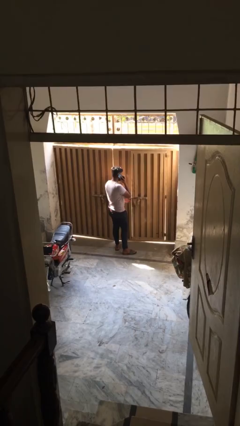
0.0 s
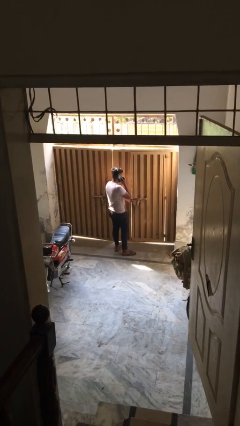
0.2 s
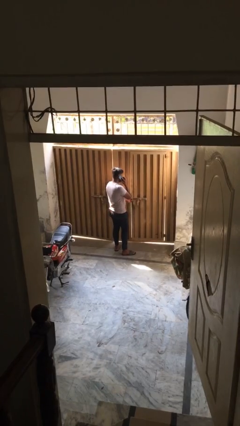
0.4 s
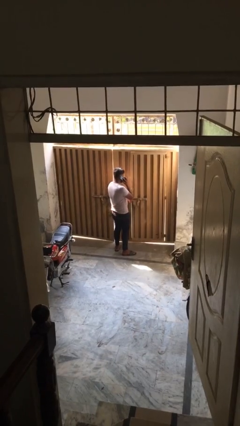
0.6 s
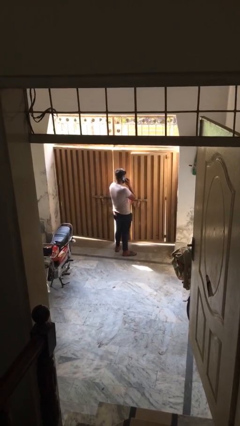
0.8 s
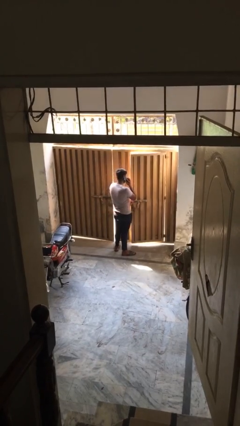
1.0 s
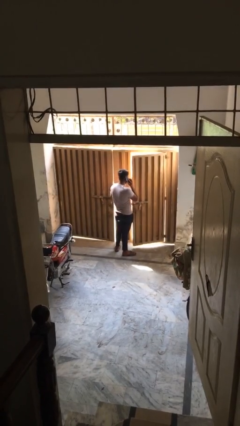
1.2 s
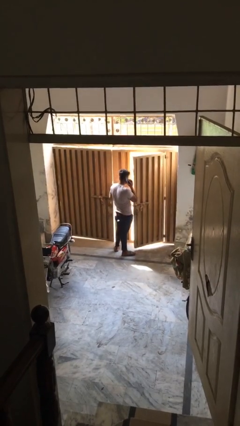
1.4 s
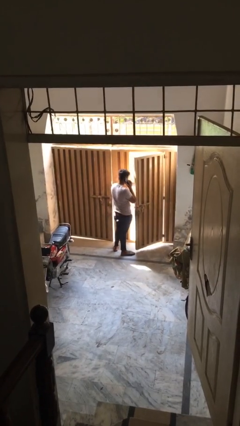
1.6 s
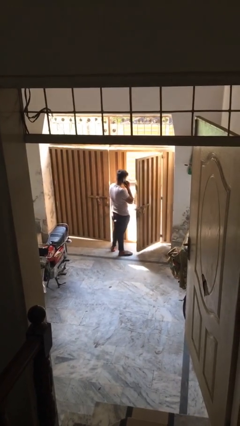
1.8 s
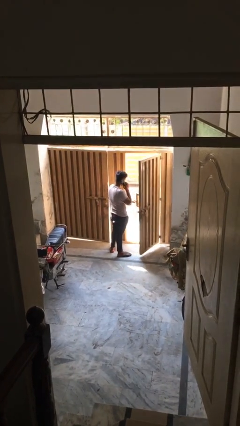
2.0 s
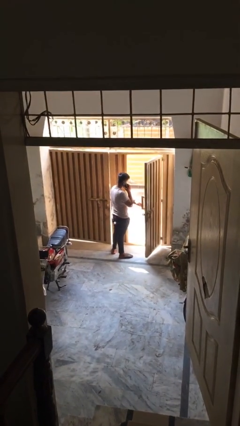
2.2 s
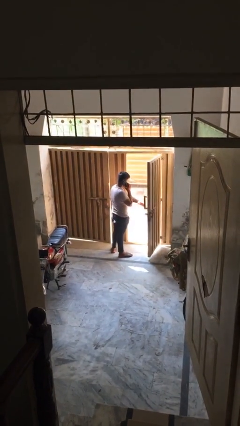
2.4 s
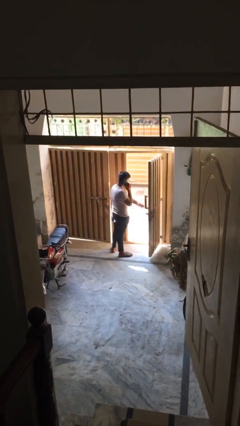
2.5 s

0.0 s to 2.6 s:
person opens facility door

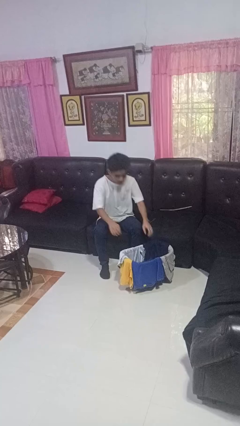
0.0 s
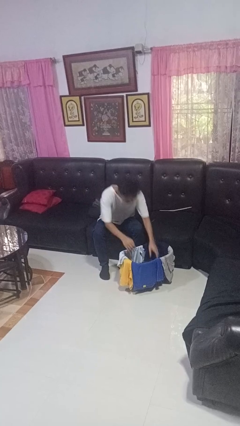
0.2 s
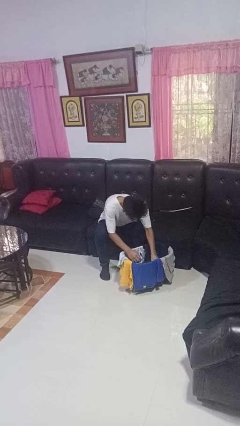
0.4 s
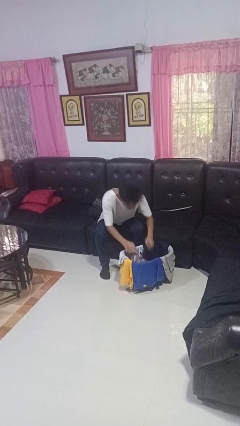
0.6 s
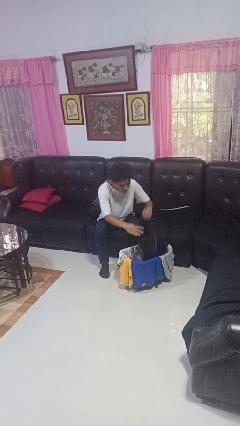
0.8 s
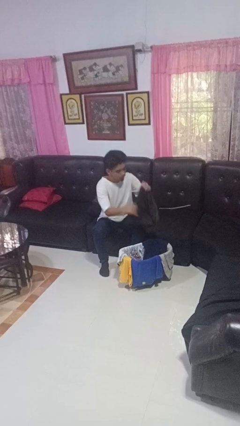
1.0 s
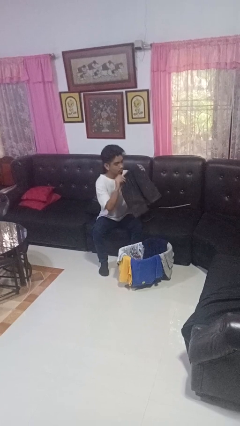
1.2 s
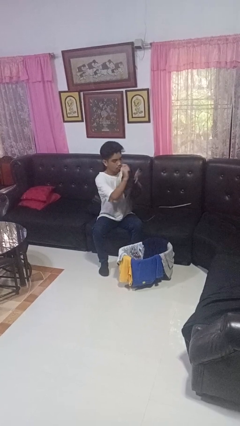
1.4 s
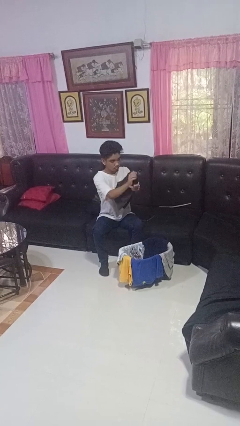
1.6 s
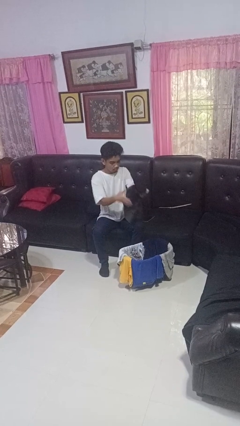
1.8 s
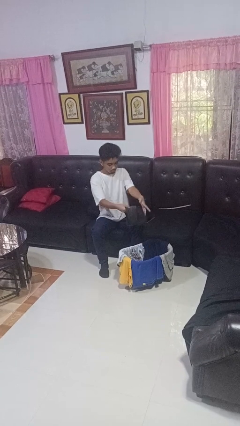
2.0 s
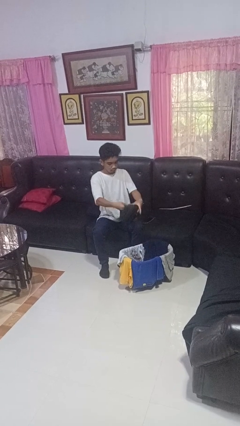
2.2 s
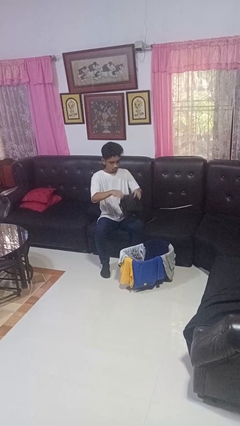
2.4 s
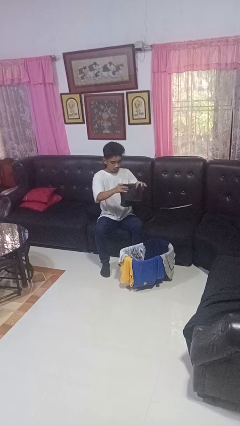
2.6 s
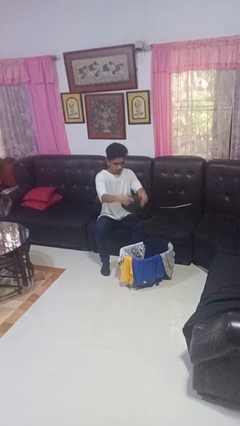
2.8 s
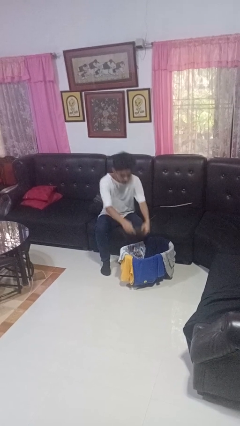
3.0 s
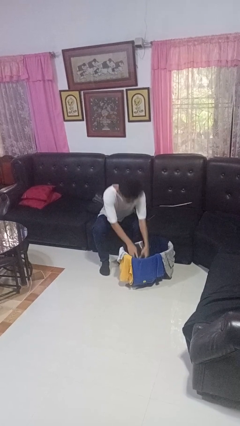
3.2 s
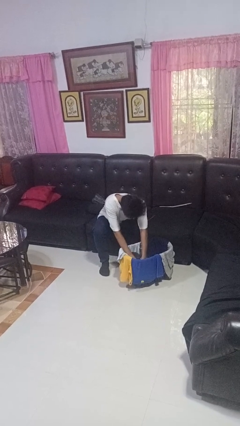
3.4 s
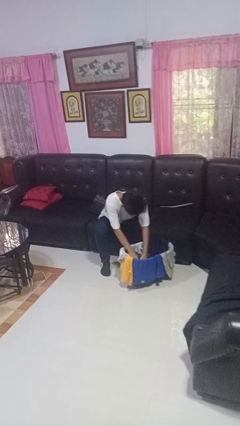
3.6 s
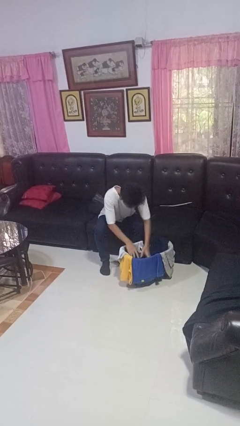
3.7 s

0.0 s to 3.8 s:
person folds pants

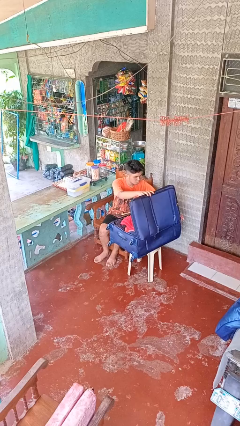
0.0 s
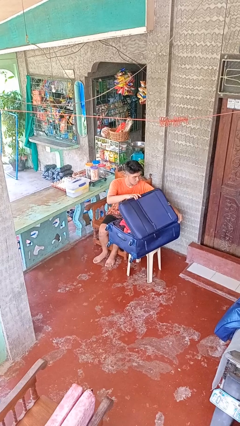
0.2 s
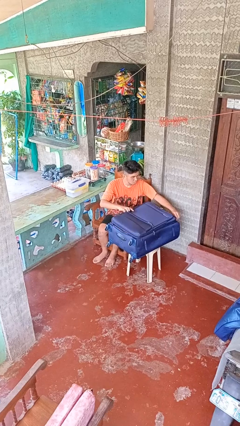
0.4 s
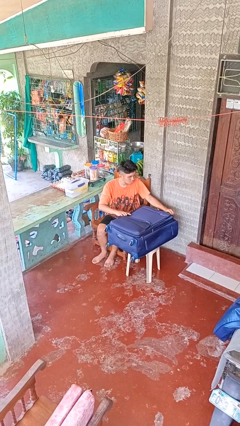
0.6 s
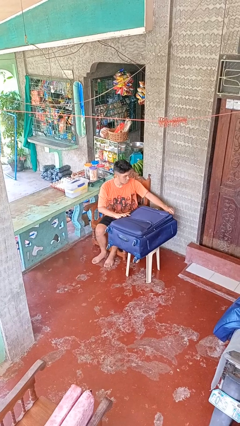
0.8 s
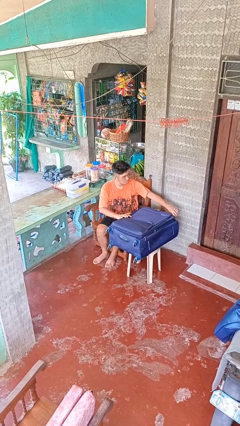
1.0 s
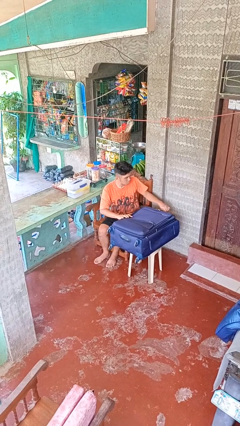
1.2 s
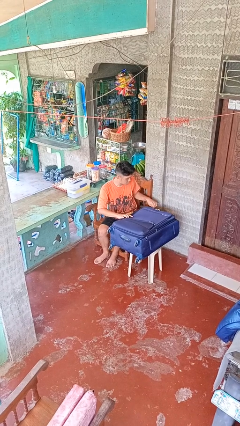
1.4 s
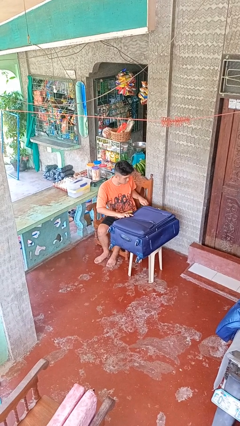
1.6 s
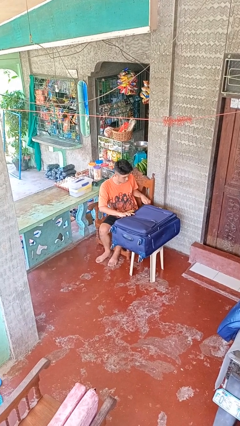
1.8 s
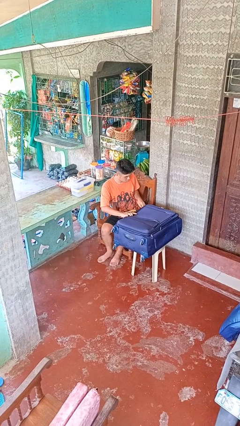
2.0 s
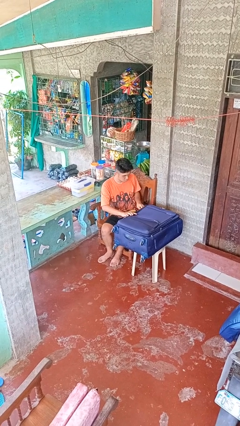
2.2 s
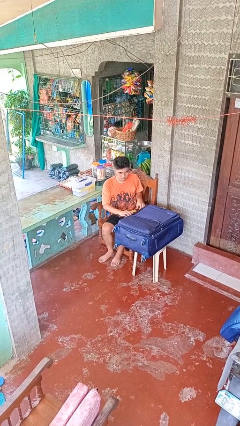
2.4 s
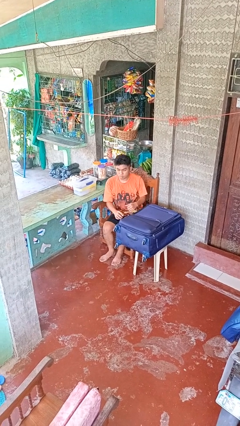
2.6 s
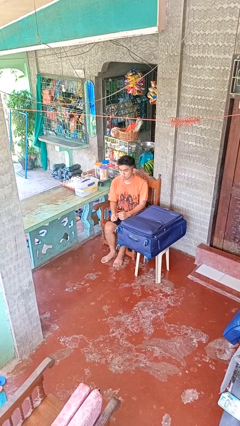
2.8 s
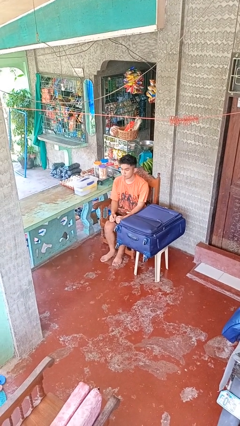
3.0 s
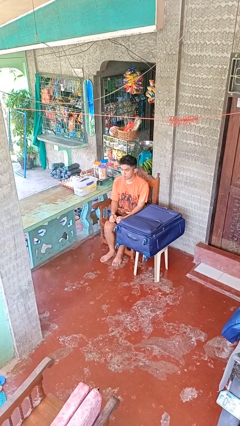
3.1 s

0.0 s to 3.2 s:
person closes suitcase

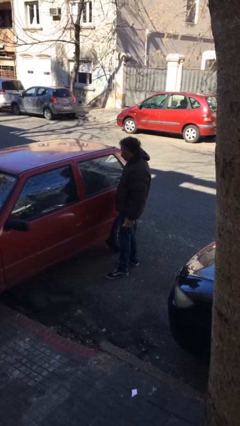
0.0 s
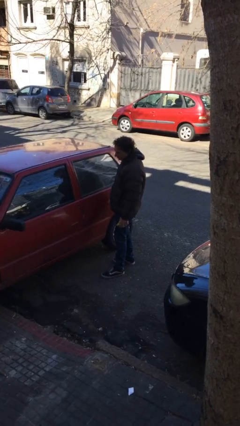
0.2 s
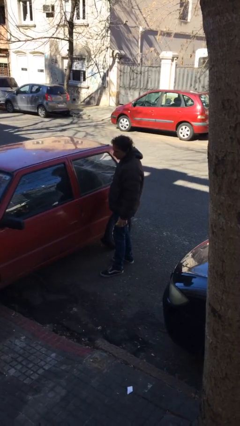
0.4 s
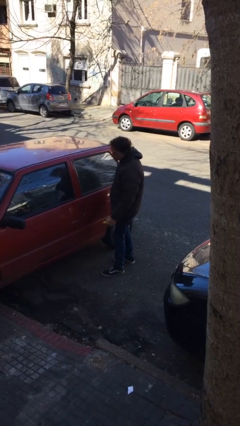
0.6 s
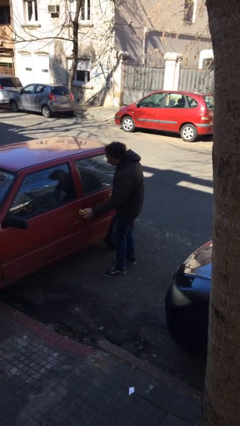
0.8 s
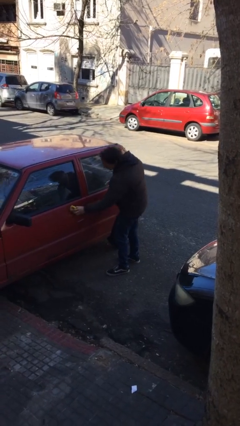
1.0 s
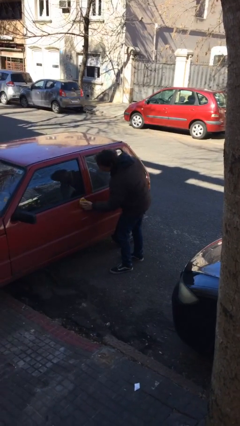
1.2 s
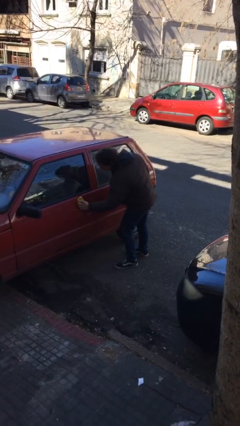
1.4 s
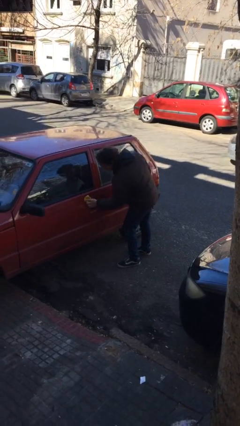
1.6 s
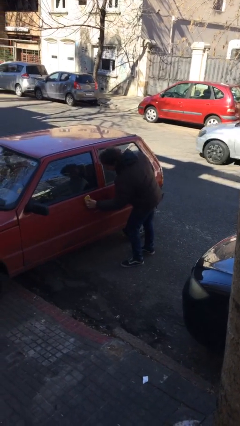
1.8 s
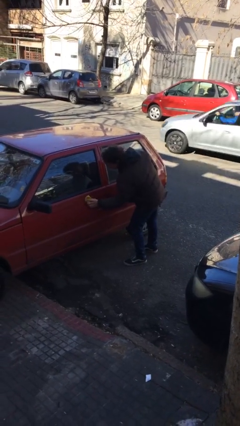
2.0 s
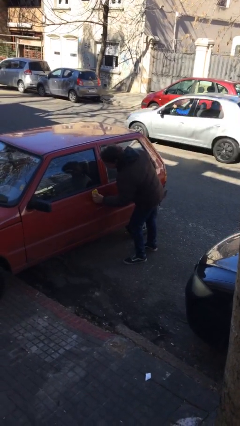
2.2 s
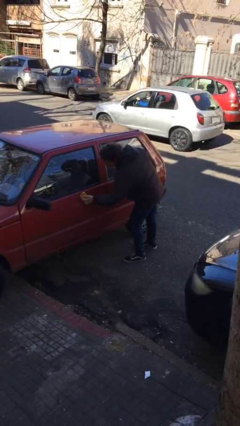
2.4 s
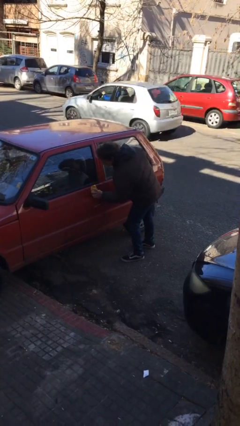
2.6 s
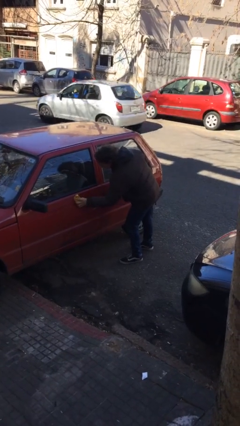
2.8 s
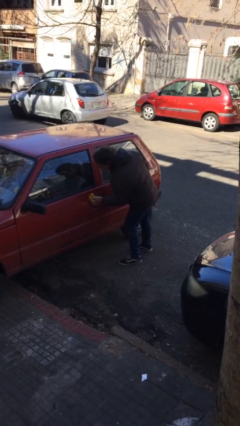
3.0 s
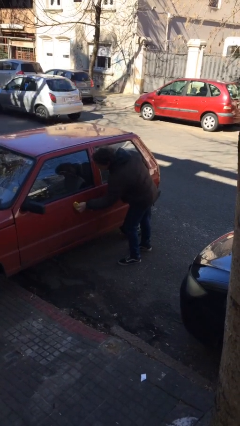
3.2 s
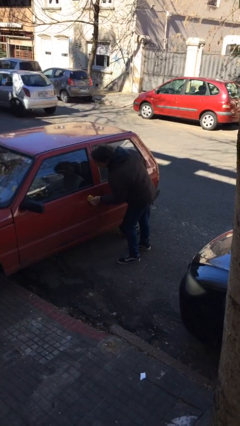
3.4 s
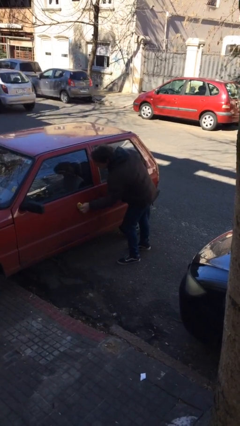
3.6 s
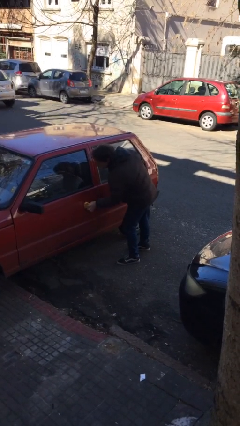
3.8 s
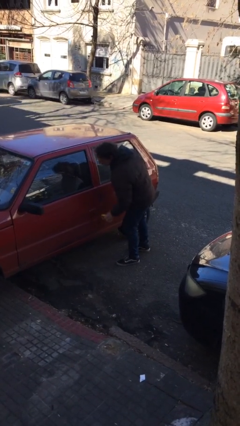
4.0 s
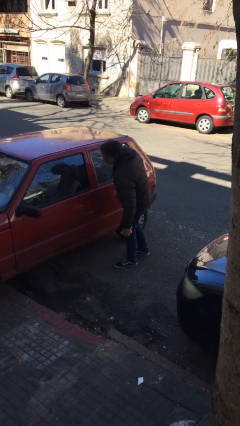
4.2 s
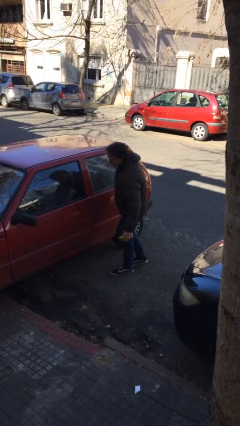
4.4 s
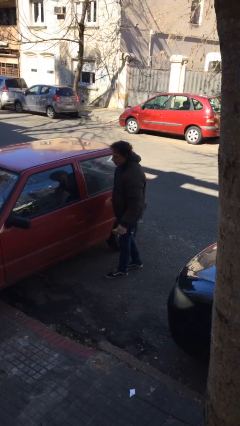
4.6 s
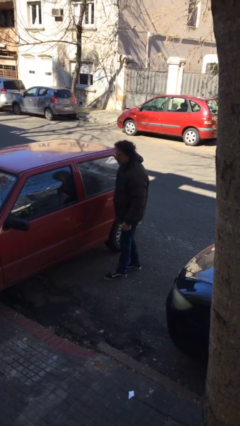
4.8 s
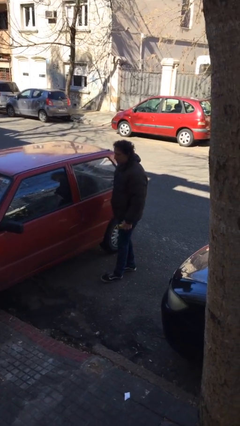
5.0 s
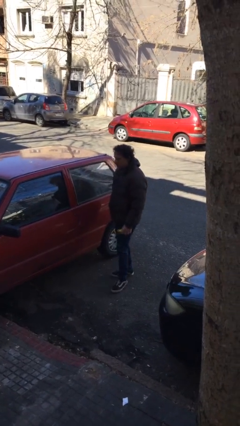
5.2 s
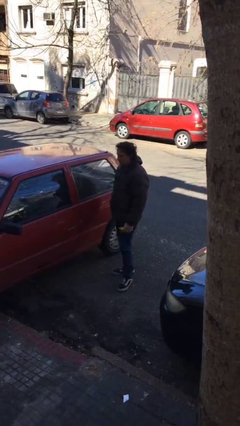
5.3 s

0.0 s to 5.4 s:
person polishes car with rag

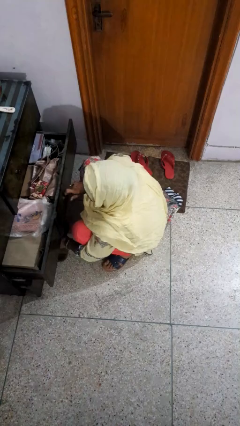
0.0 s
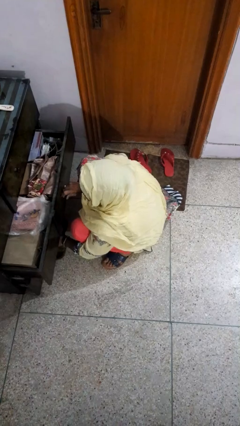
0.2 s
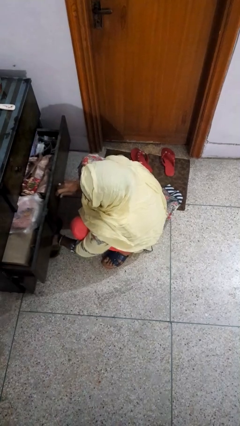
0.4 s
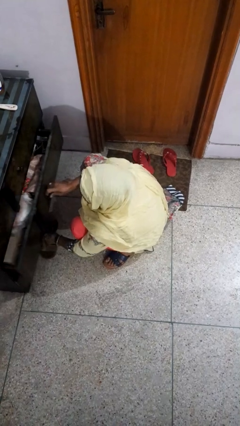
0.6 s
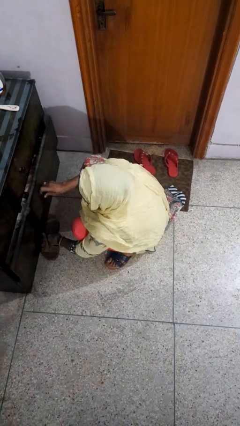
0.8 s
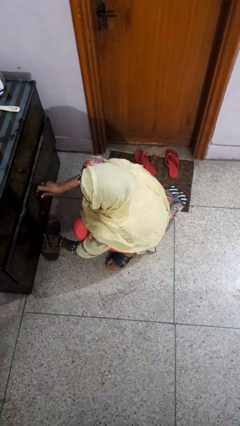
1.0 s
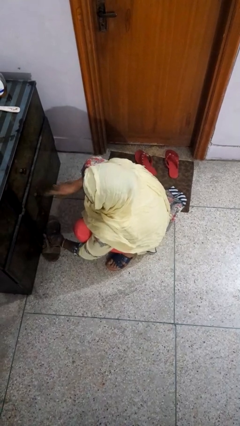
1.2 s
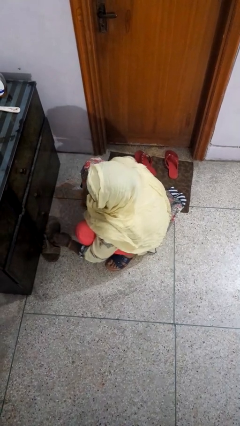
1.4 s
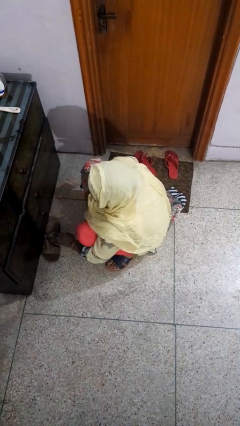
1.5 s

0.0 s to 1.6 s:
person closes dresser drawer

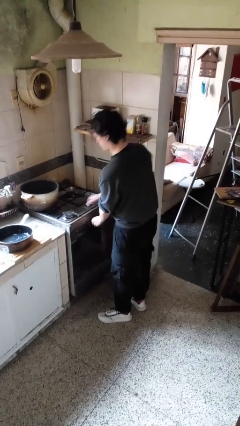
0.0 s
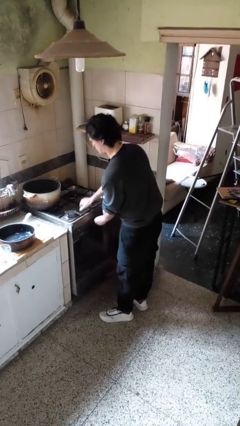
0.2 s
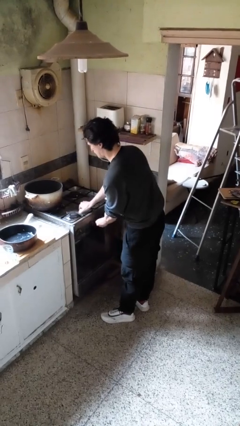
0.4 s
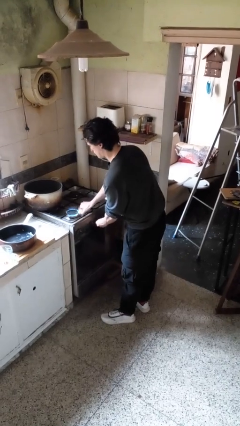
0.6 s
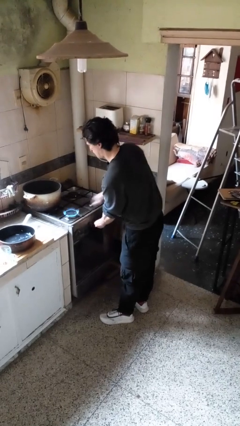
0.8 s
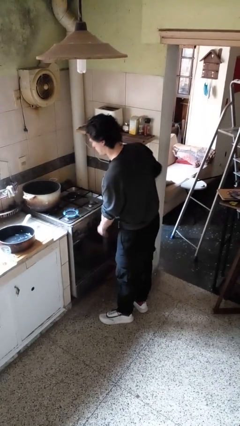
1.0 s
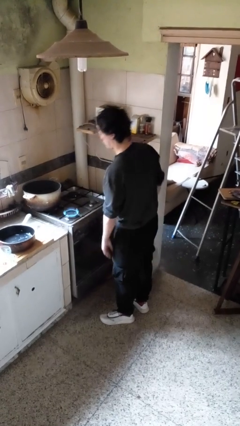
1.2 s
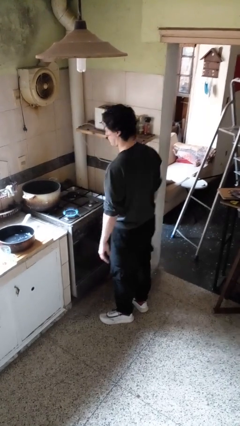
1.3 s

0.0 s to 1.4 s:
person turns on stovetop
